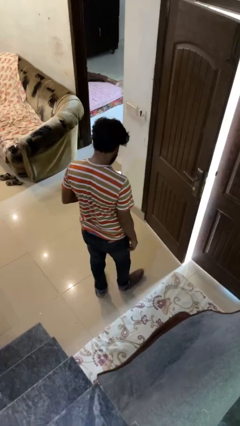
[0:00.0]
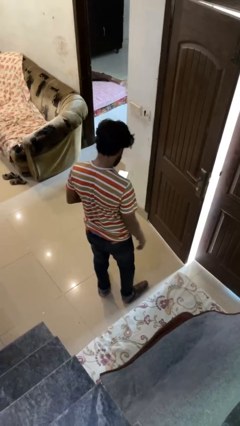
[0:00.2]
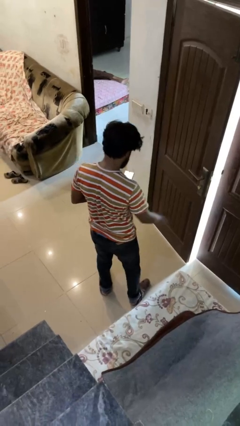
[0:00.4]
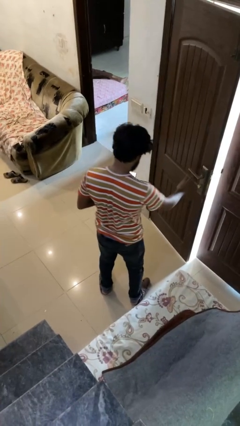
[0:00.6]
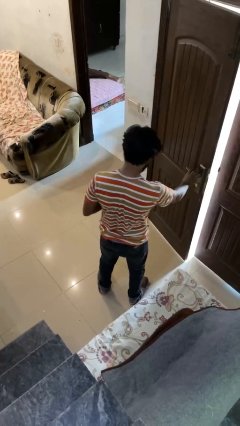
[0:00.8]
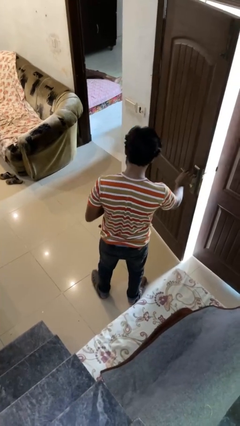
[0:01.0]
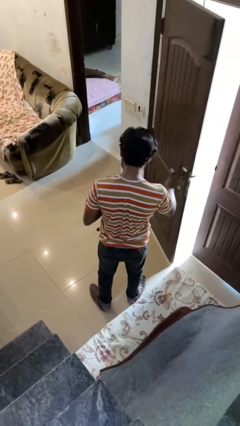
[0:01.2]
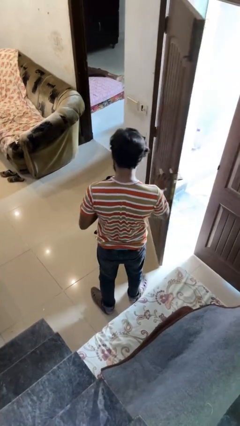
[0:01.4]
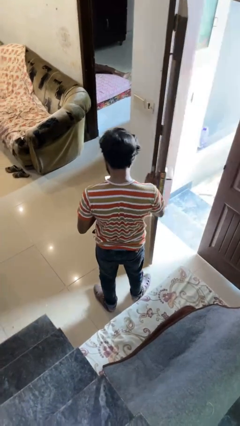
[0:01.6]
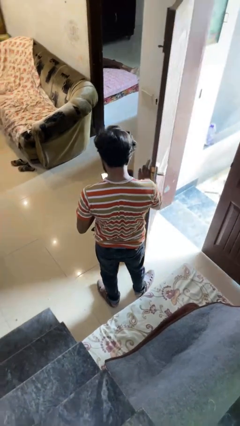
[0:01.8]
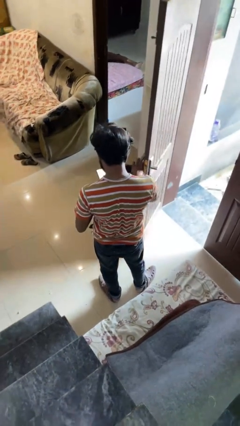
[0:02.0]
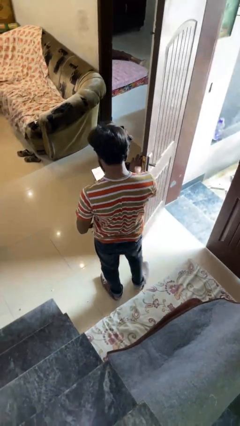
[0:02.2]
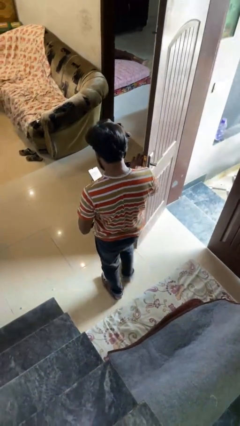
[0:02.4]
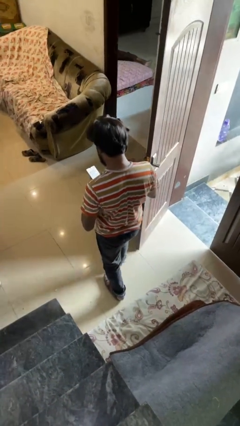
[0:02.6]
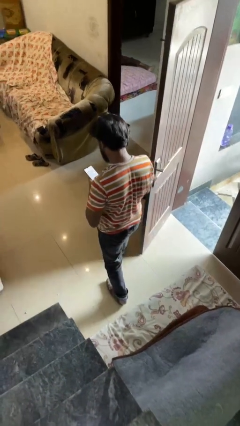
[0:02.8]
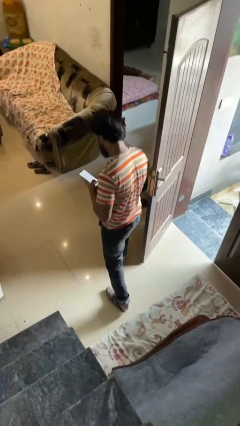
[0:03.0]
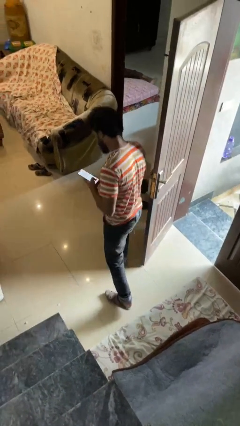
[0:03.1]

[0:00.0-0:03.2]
person opens facility door

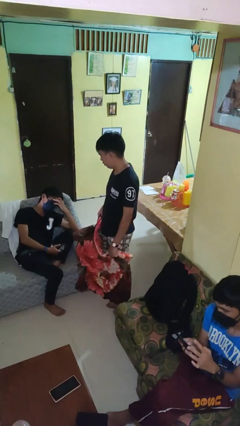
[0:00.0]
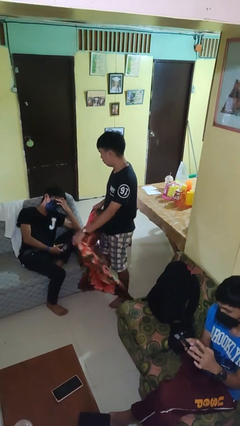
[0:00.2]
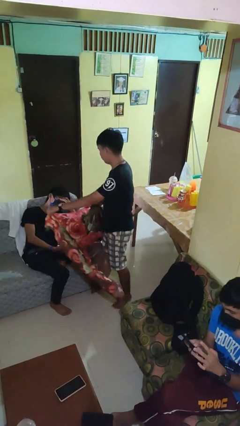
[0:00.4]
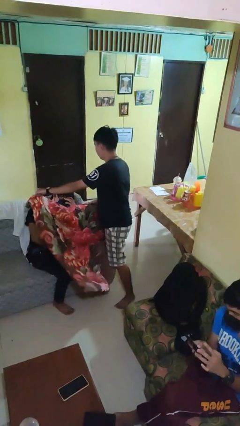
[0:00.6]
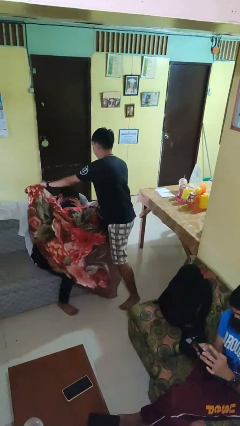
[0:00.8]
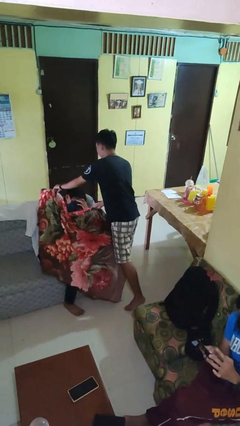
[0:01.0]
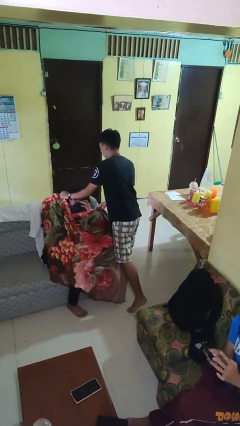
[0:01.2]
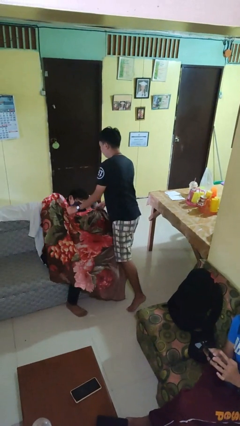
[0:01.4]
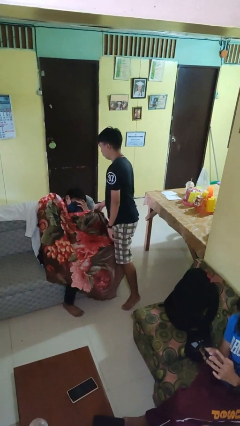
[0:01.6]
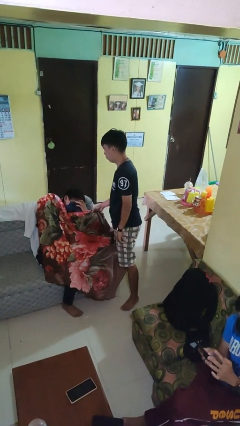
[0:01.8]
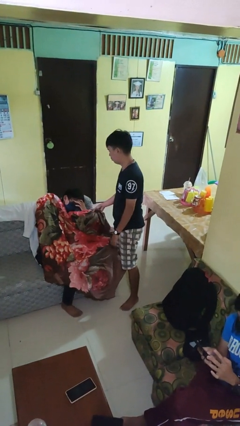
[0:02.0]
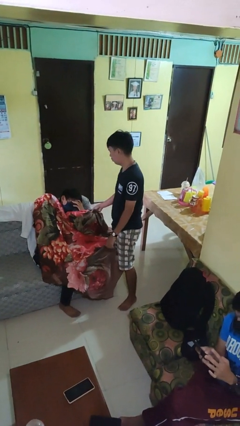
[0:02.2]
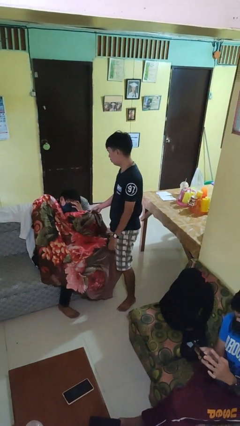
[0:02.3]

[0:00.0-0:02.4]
person covers friend with blanket

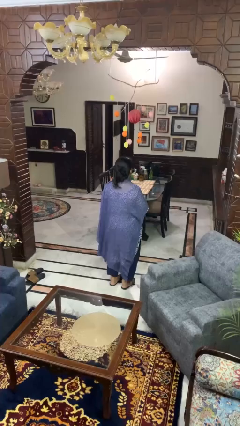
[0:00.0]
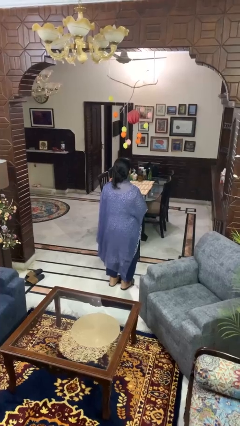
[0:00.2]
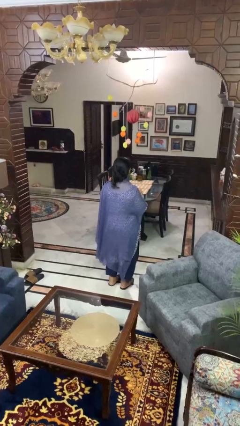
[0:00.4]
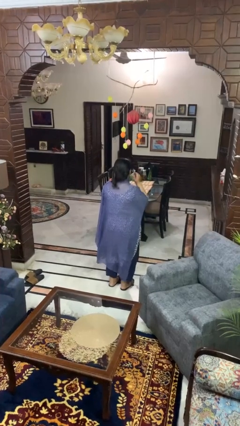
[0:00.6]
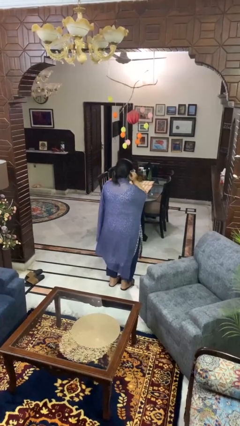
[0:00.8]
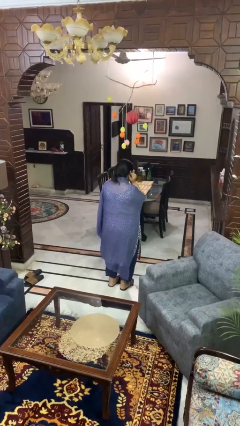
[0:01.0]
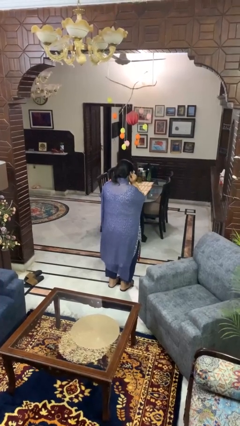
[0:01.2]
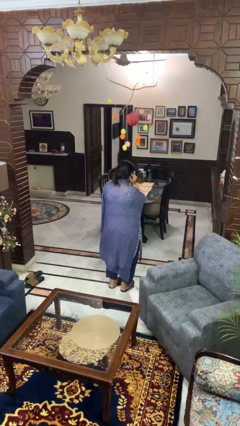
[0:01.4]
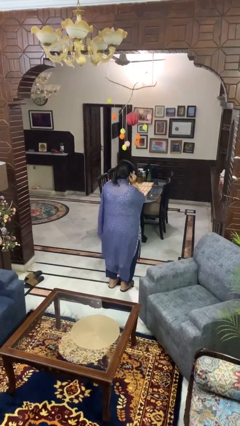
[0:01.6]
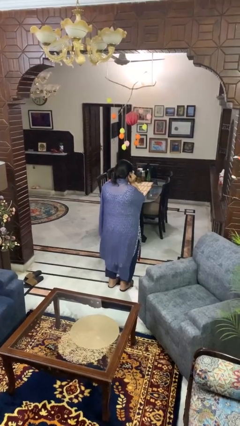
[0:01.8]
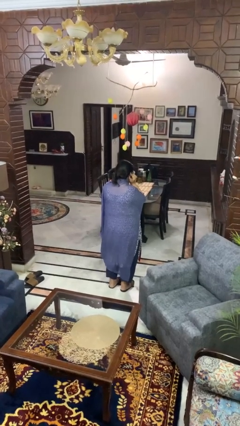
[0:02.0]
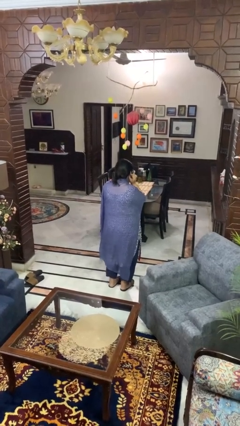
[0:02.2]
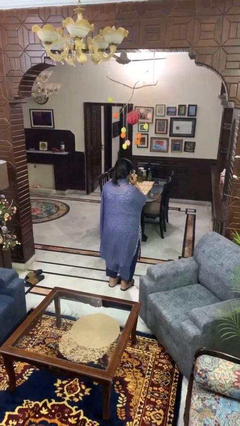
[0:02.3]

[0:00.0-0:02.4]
person puts fingers in ear

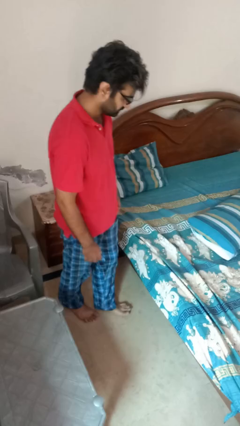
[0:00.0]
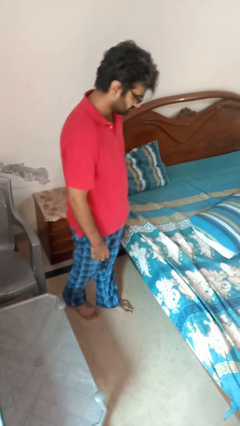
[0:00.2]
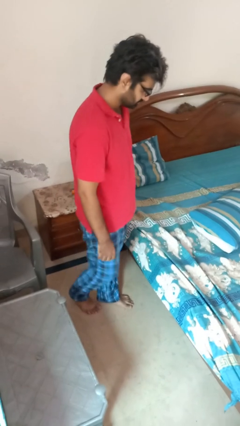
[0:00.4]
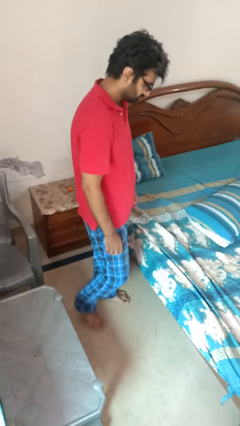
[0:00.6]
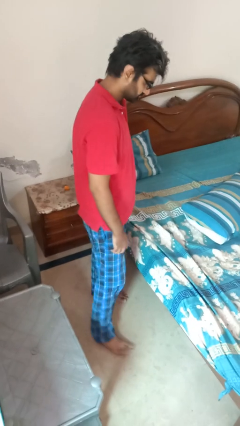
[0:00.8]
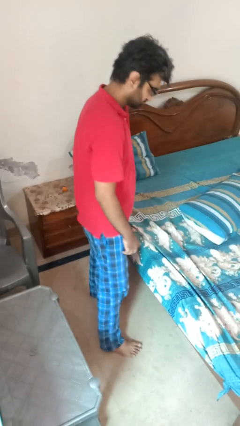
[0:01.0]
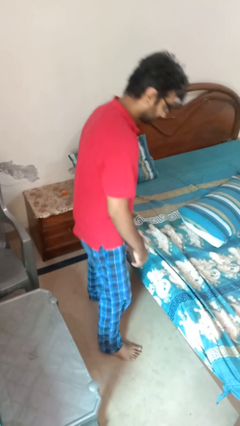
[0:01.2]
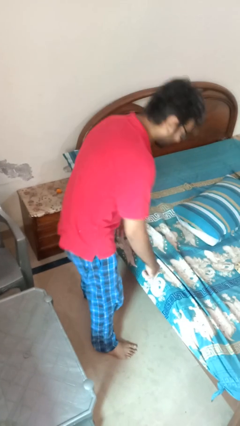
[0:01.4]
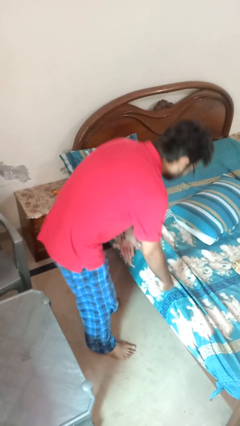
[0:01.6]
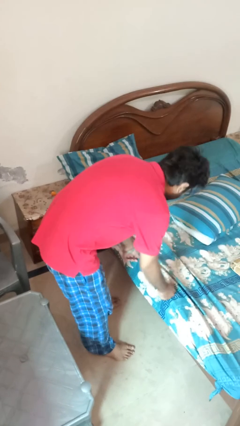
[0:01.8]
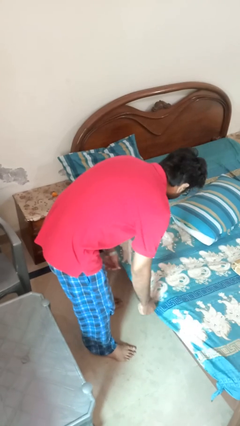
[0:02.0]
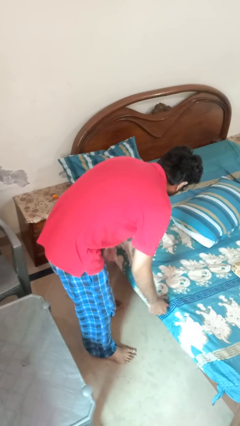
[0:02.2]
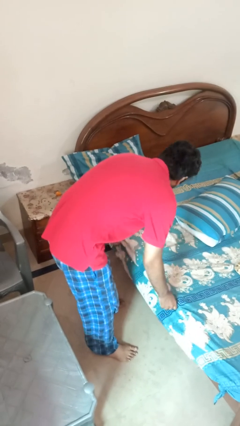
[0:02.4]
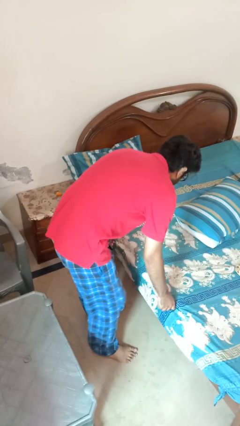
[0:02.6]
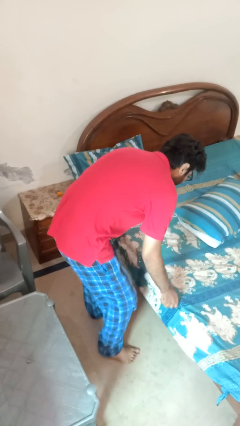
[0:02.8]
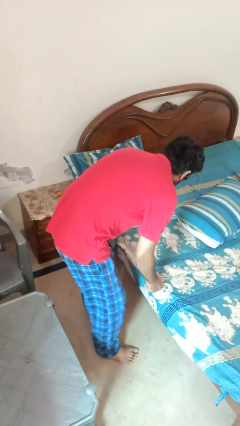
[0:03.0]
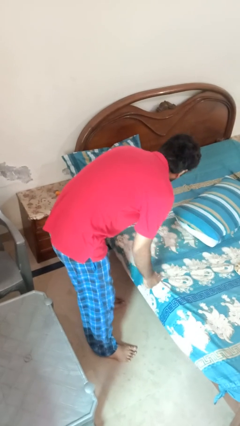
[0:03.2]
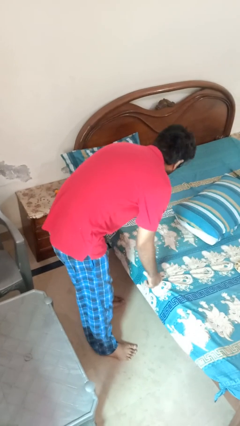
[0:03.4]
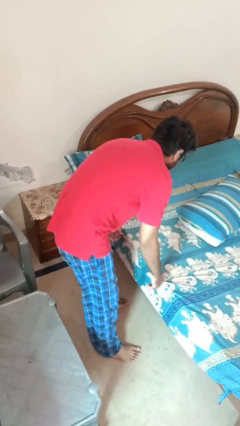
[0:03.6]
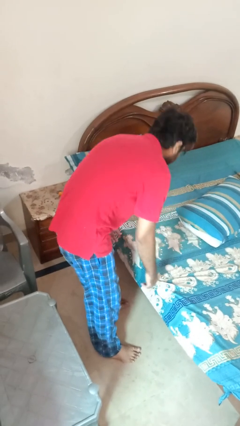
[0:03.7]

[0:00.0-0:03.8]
person makes bed

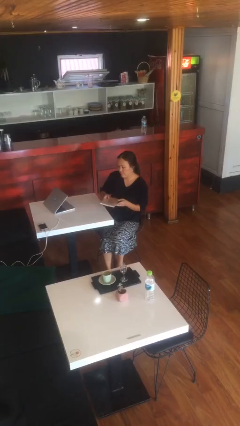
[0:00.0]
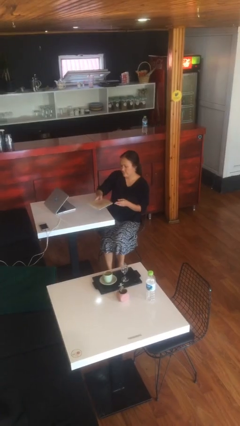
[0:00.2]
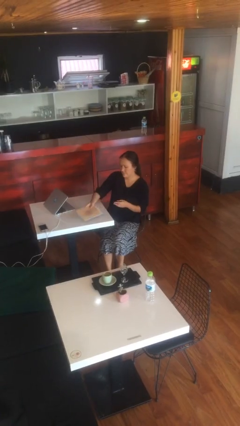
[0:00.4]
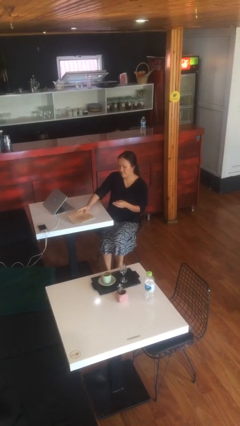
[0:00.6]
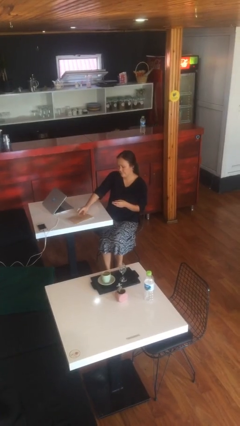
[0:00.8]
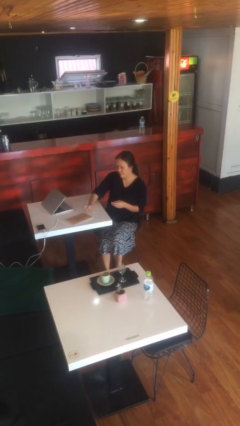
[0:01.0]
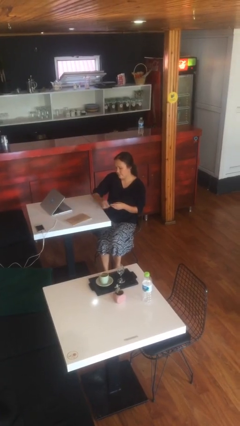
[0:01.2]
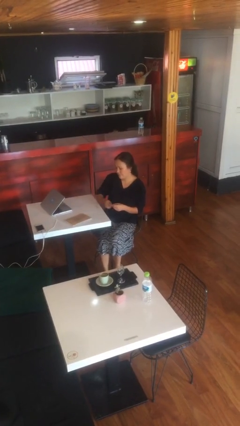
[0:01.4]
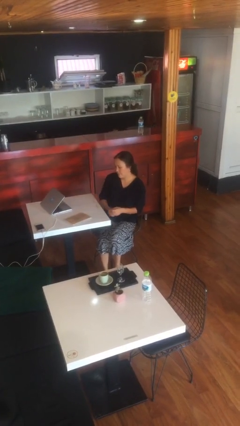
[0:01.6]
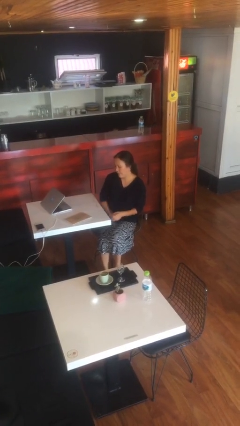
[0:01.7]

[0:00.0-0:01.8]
person puts down object on table

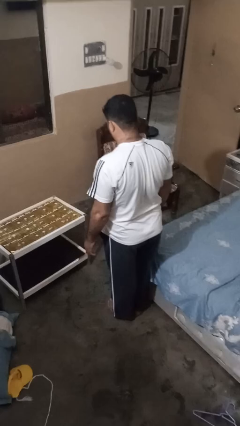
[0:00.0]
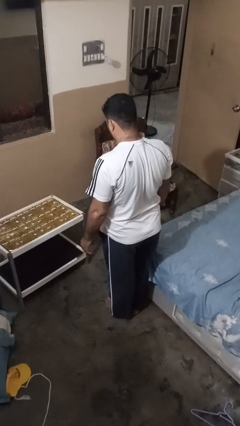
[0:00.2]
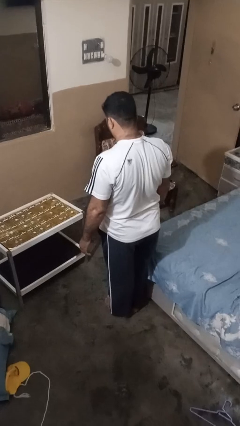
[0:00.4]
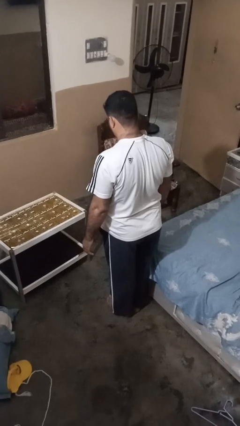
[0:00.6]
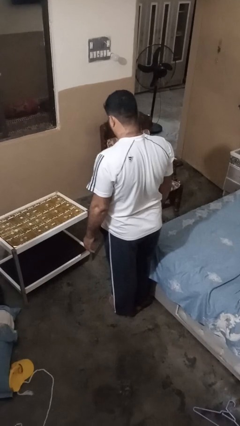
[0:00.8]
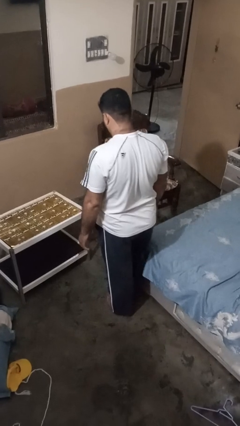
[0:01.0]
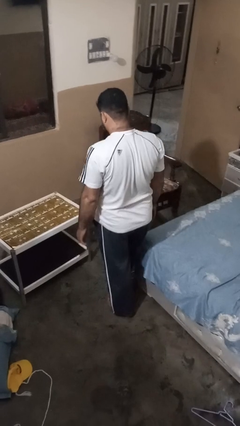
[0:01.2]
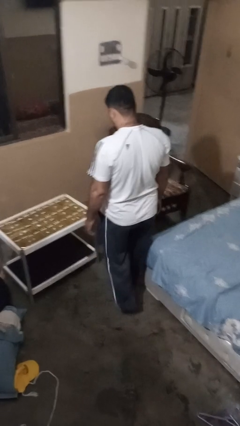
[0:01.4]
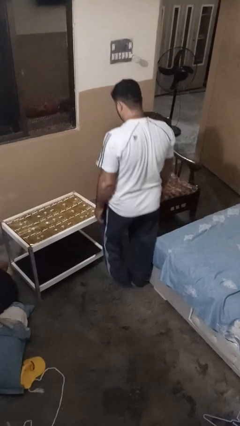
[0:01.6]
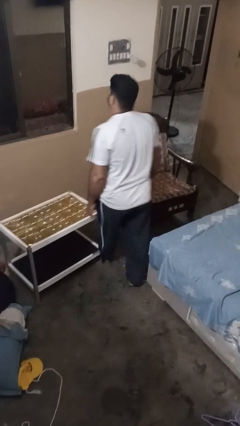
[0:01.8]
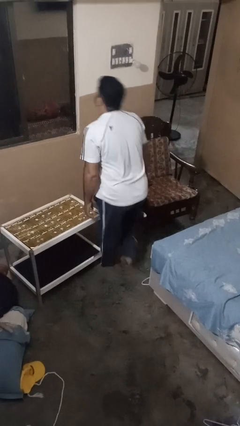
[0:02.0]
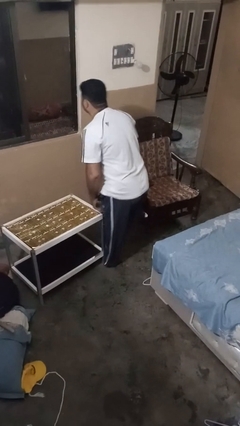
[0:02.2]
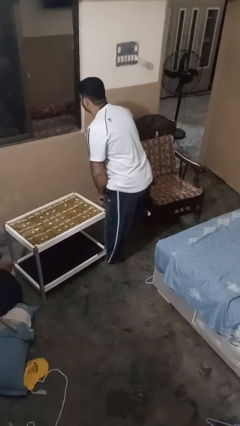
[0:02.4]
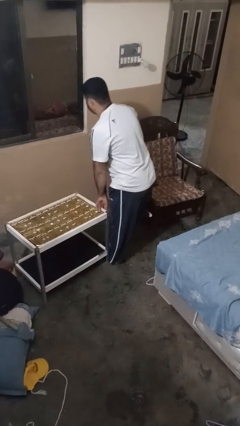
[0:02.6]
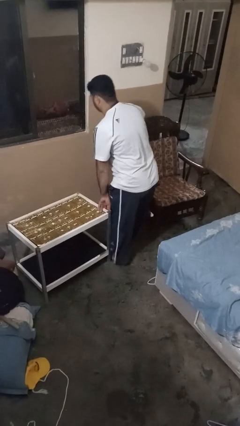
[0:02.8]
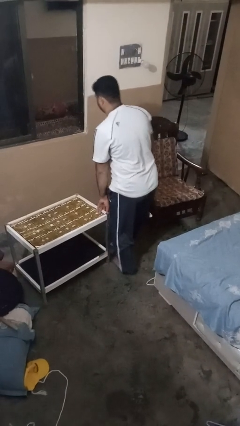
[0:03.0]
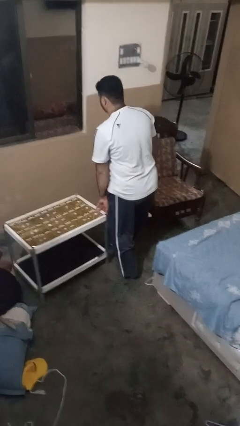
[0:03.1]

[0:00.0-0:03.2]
person bumps into table
